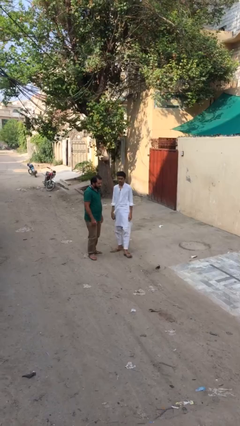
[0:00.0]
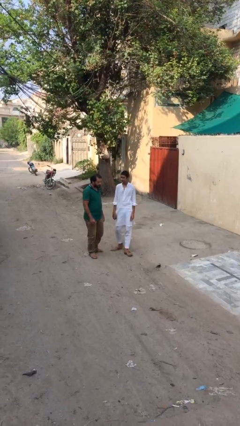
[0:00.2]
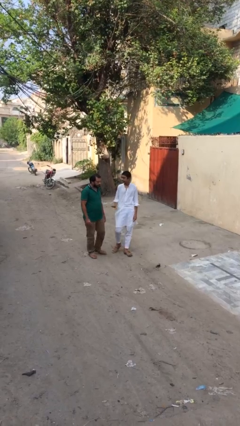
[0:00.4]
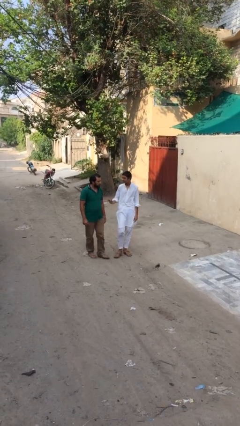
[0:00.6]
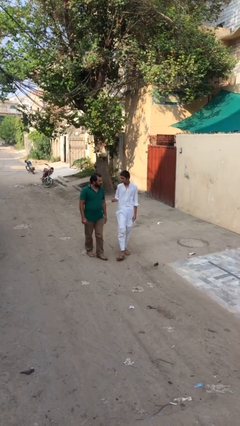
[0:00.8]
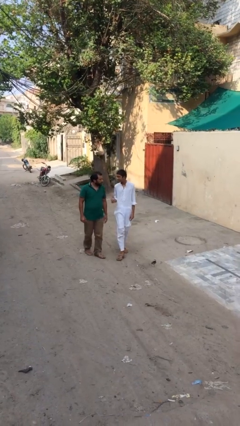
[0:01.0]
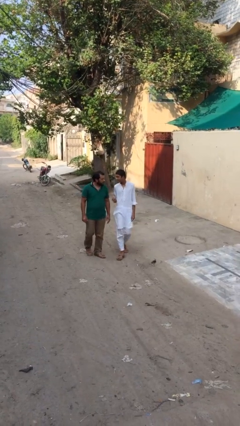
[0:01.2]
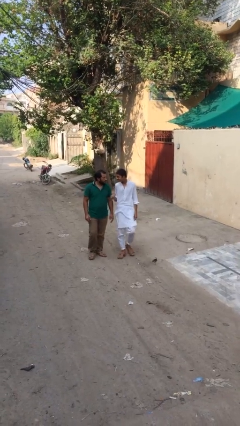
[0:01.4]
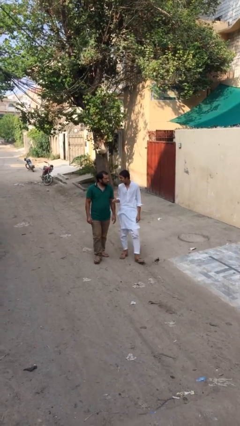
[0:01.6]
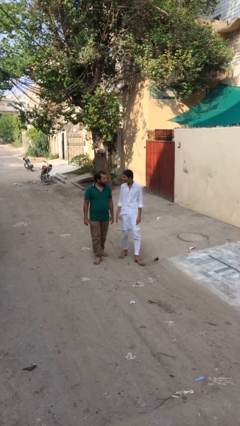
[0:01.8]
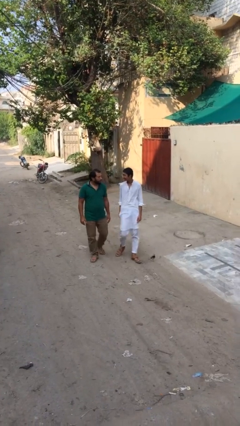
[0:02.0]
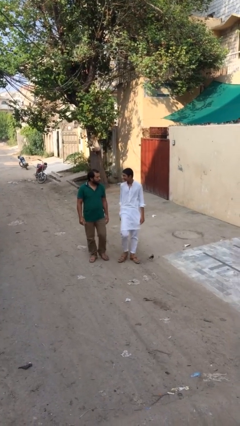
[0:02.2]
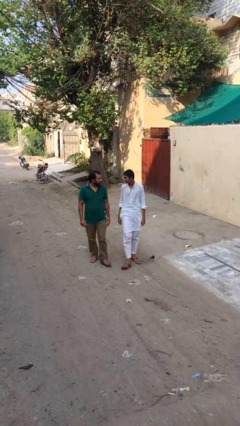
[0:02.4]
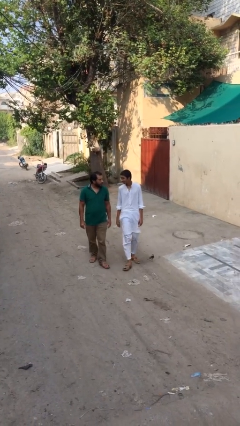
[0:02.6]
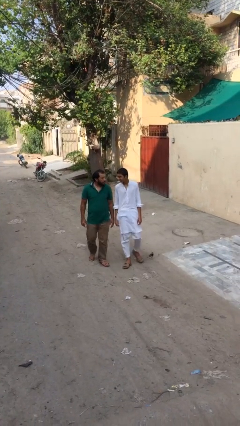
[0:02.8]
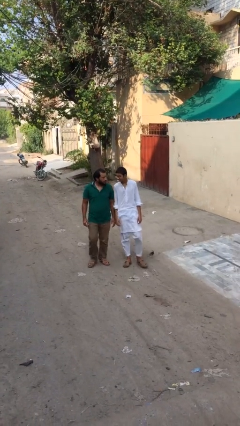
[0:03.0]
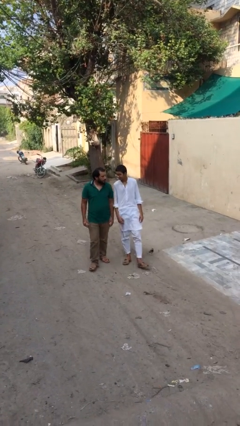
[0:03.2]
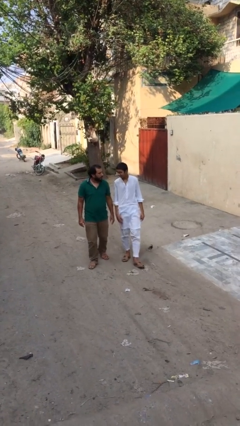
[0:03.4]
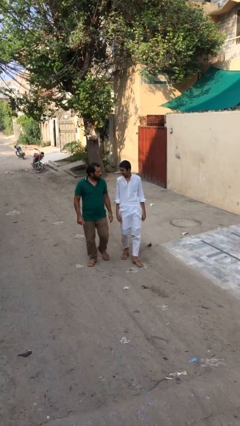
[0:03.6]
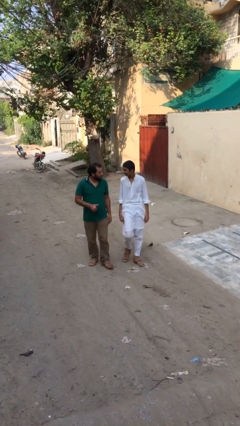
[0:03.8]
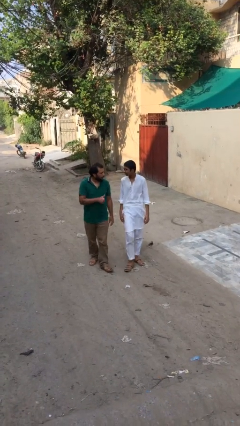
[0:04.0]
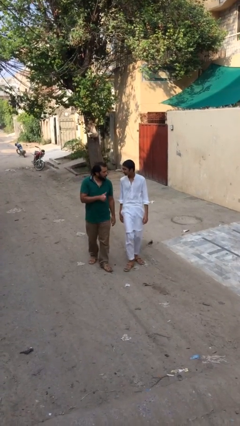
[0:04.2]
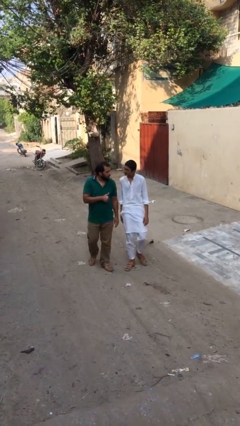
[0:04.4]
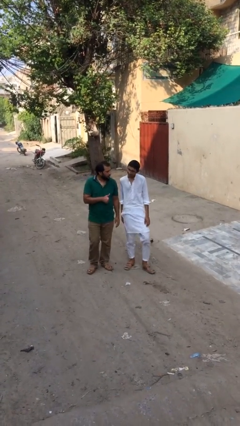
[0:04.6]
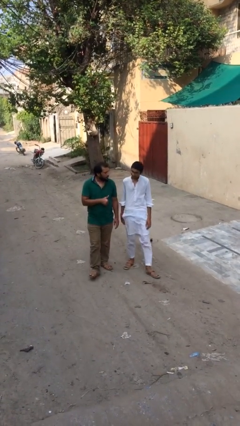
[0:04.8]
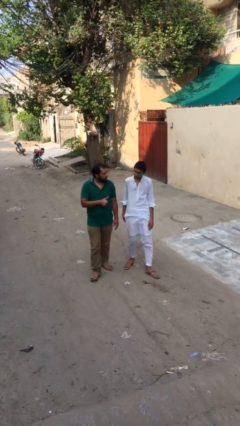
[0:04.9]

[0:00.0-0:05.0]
person talks to person

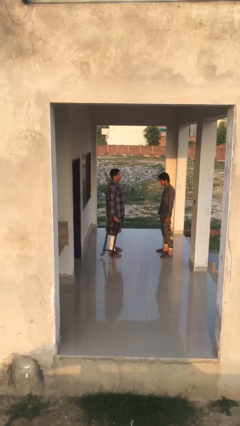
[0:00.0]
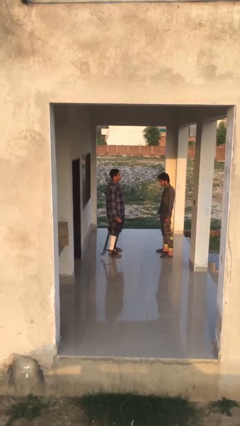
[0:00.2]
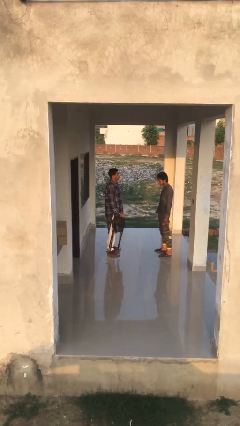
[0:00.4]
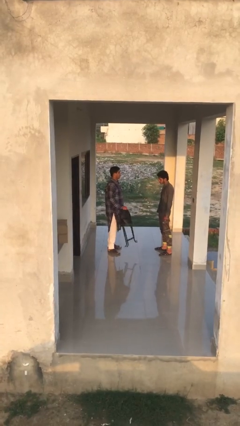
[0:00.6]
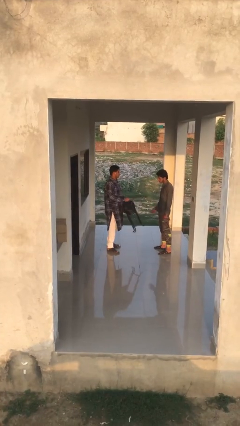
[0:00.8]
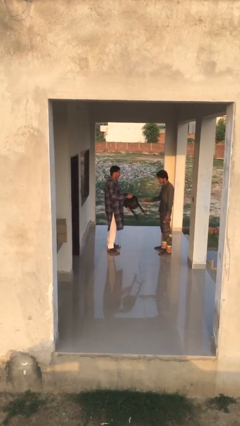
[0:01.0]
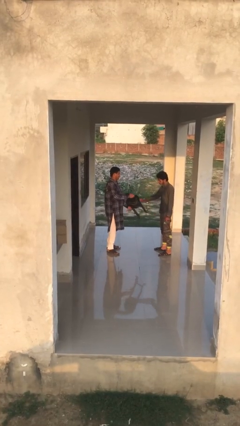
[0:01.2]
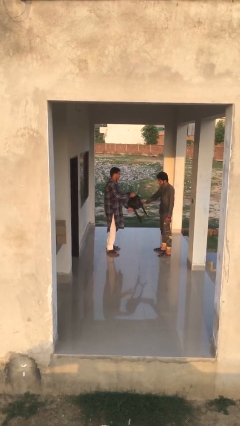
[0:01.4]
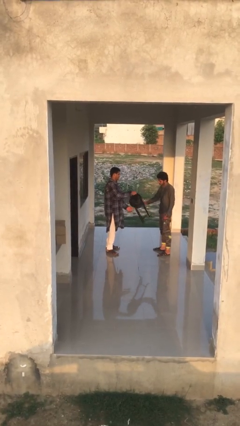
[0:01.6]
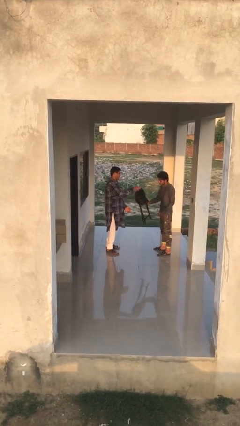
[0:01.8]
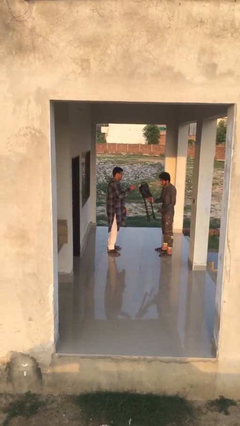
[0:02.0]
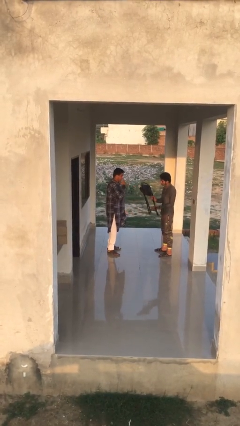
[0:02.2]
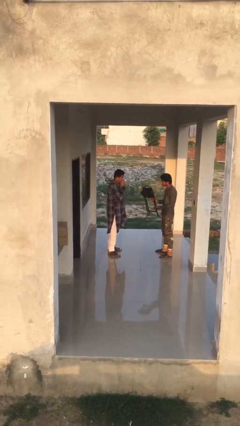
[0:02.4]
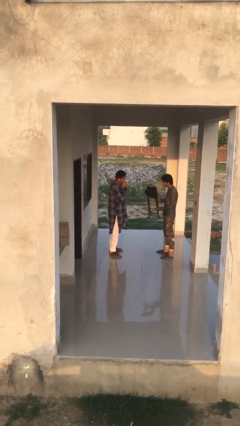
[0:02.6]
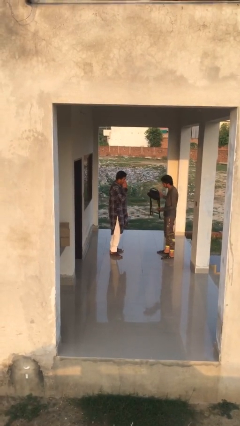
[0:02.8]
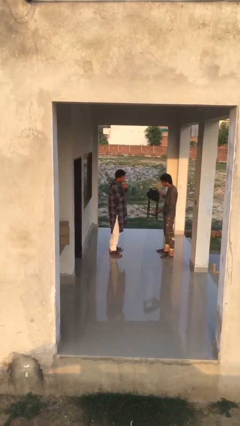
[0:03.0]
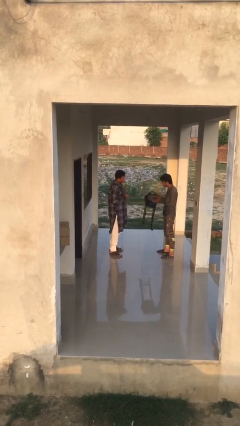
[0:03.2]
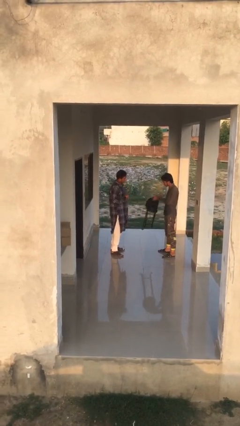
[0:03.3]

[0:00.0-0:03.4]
person transfers object to person

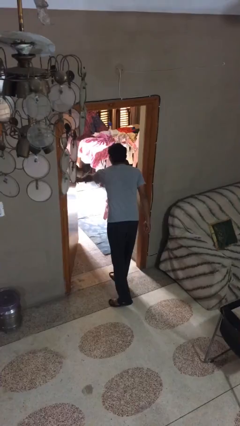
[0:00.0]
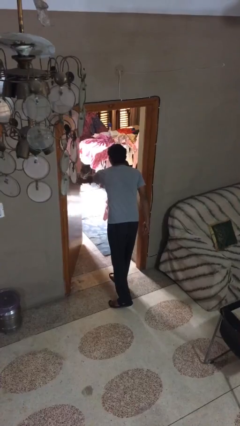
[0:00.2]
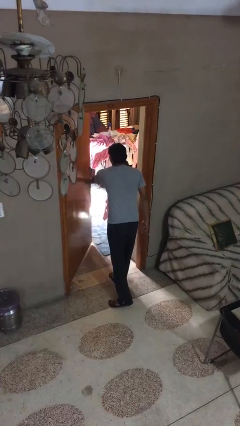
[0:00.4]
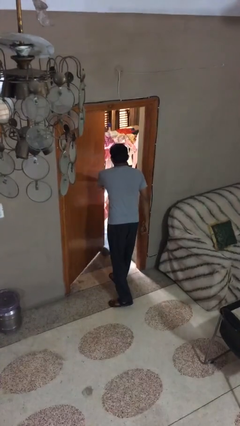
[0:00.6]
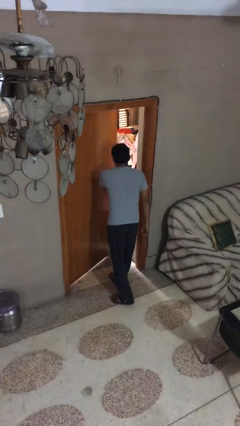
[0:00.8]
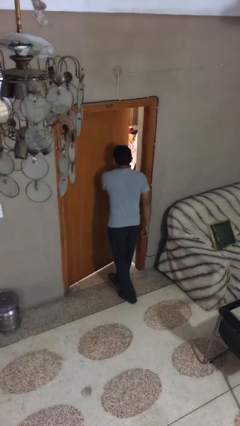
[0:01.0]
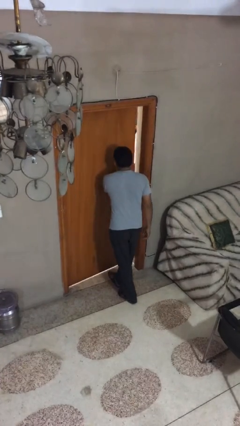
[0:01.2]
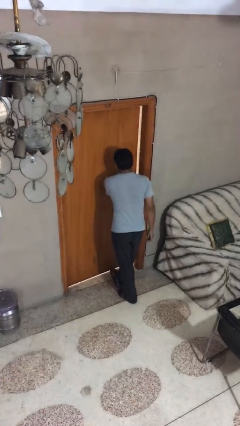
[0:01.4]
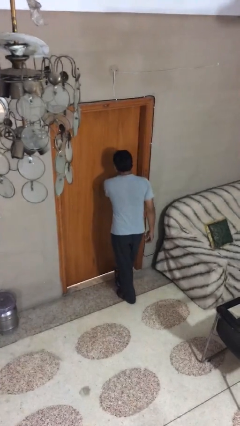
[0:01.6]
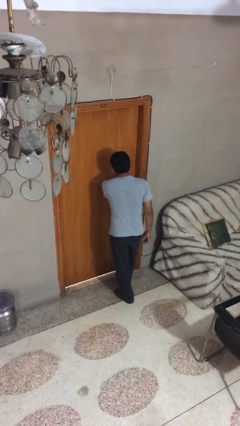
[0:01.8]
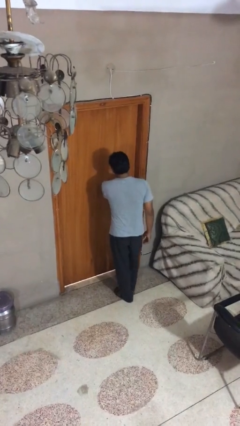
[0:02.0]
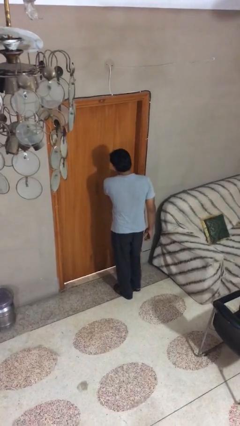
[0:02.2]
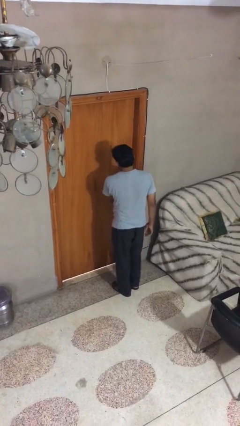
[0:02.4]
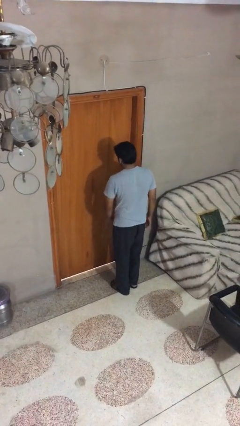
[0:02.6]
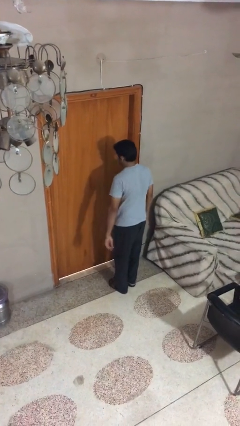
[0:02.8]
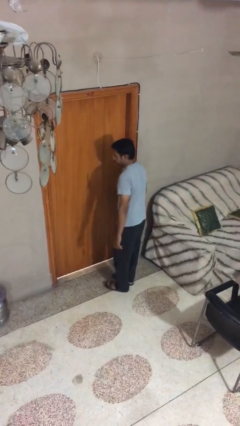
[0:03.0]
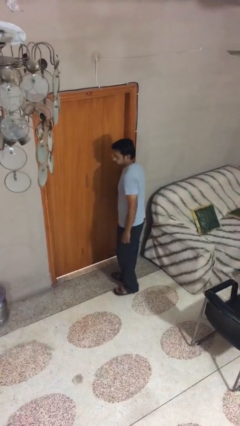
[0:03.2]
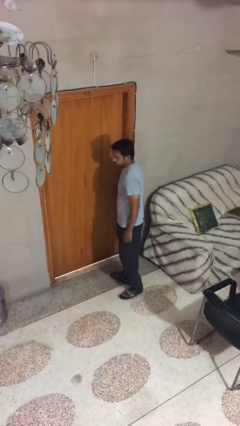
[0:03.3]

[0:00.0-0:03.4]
person closes facility door

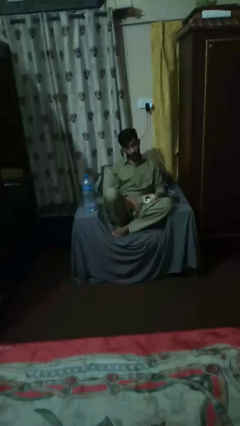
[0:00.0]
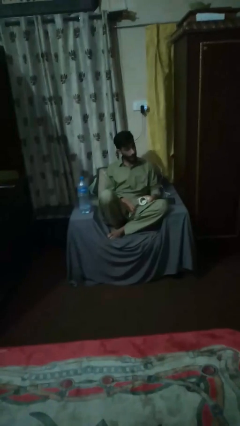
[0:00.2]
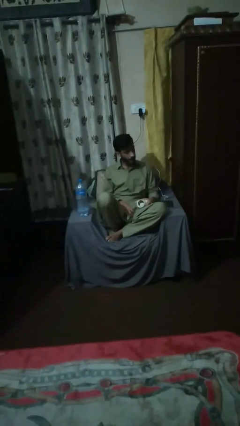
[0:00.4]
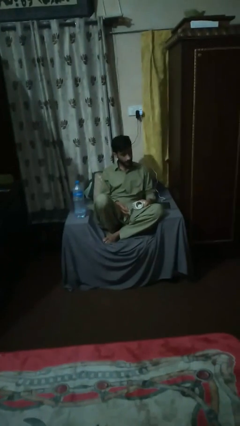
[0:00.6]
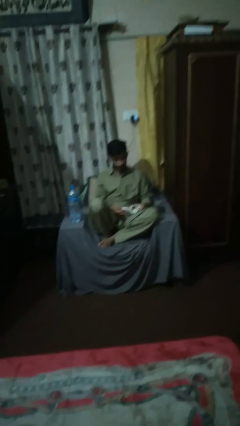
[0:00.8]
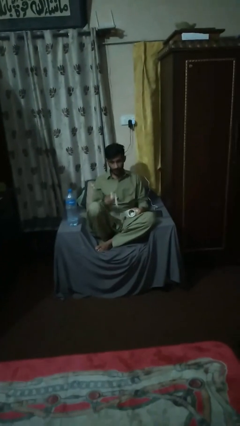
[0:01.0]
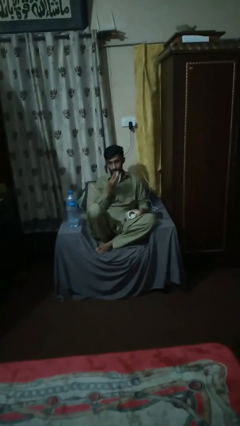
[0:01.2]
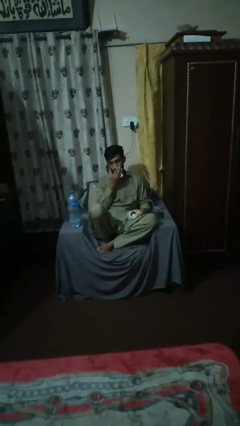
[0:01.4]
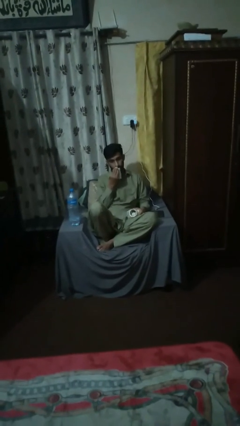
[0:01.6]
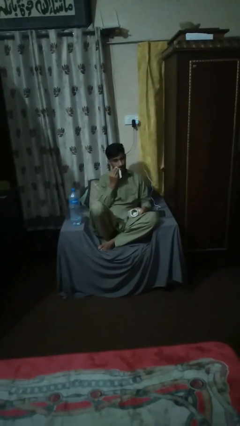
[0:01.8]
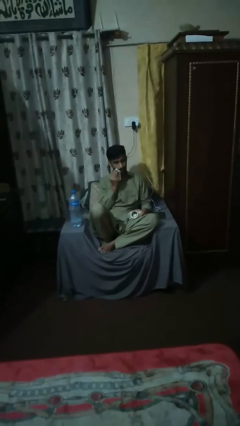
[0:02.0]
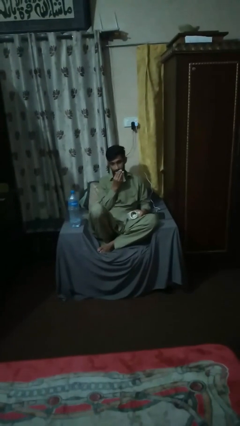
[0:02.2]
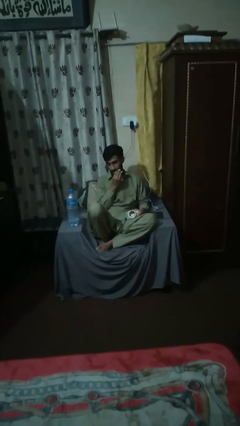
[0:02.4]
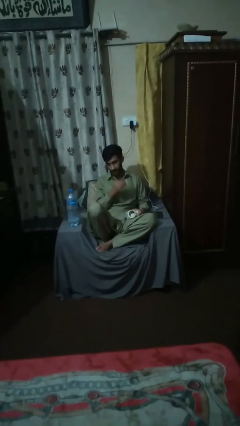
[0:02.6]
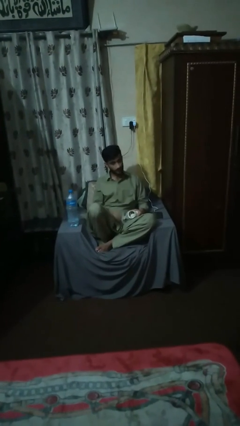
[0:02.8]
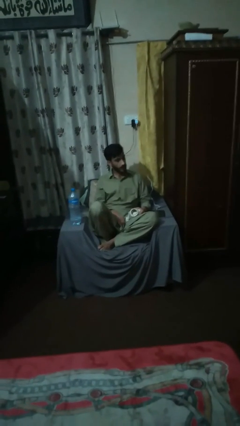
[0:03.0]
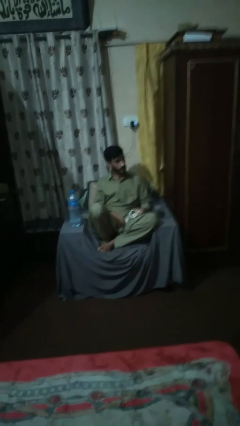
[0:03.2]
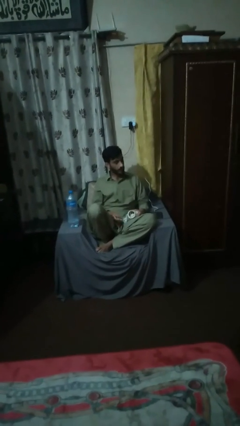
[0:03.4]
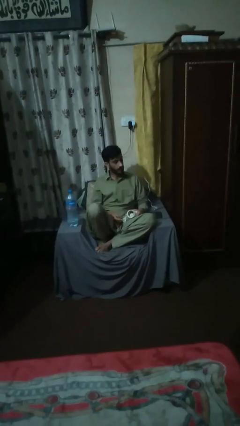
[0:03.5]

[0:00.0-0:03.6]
person wipes mouth with napkin

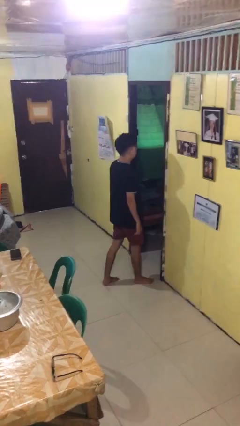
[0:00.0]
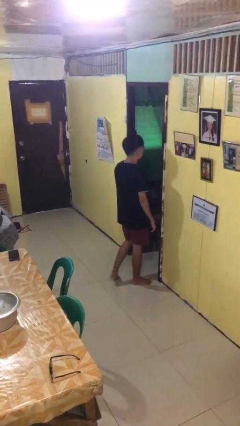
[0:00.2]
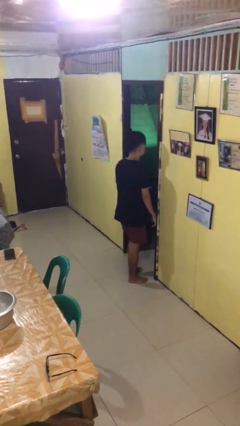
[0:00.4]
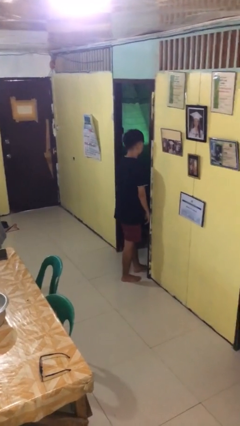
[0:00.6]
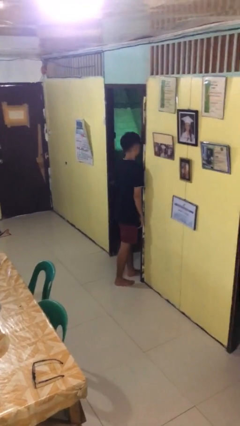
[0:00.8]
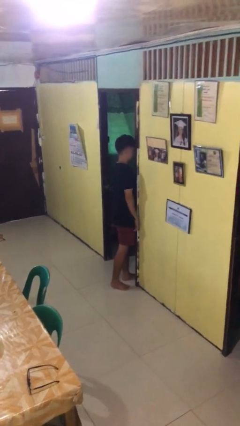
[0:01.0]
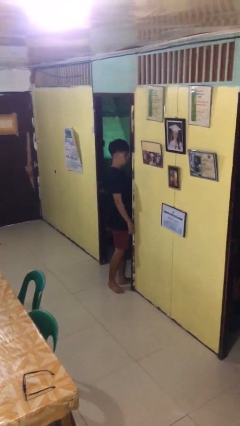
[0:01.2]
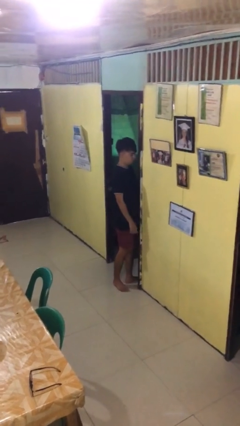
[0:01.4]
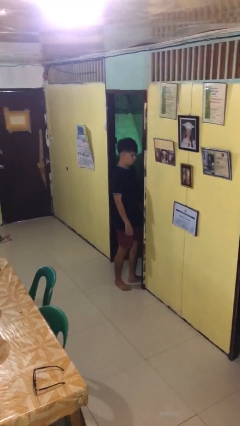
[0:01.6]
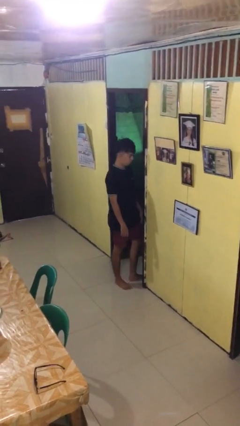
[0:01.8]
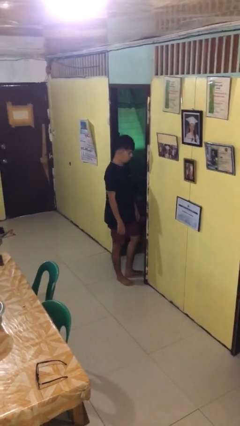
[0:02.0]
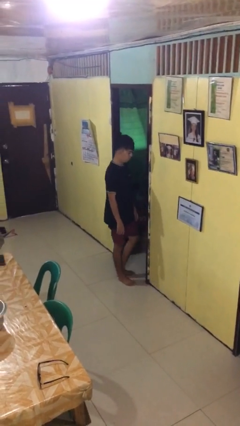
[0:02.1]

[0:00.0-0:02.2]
person bumps into wall
